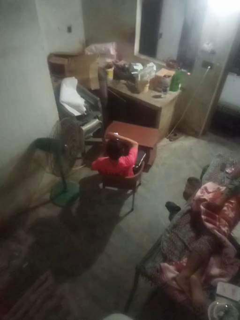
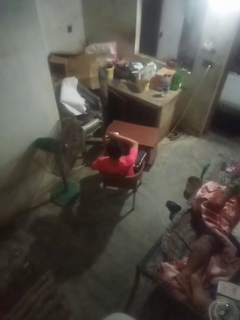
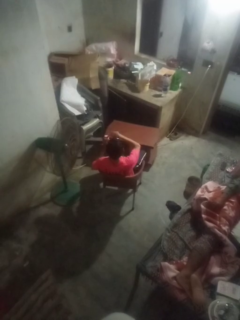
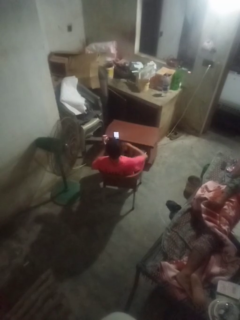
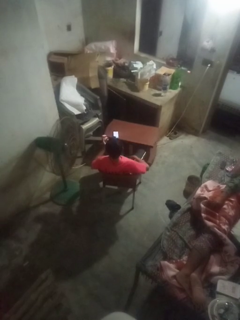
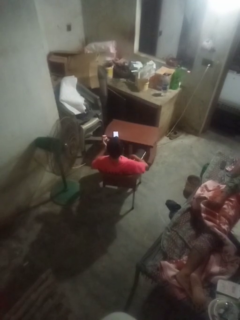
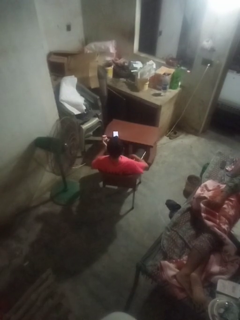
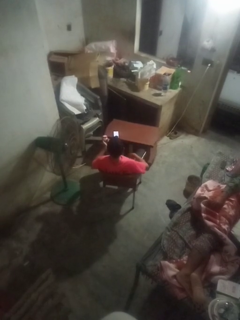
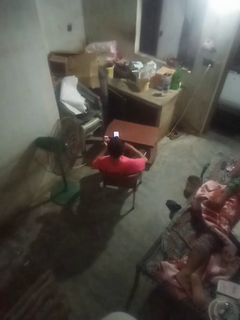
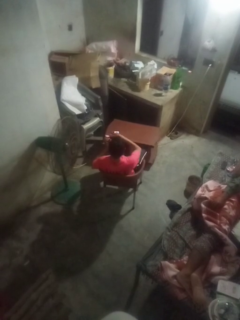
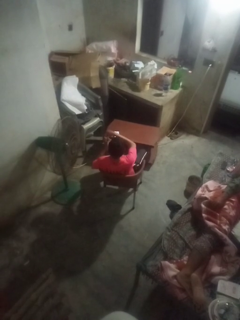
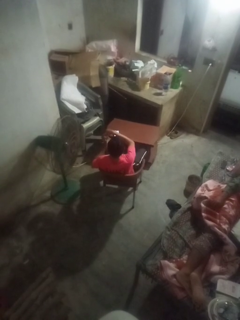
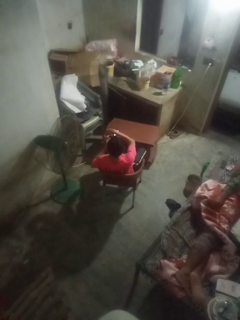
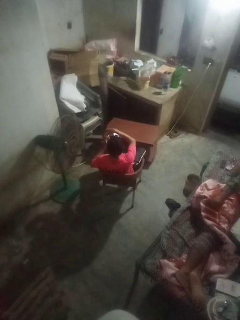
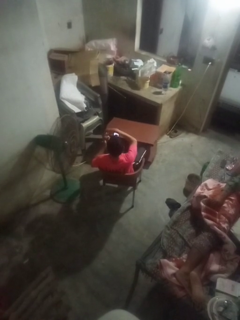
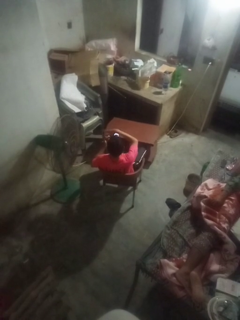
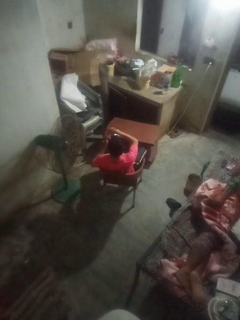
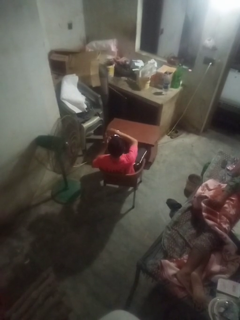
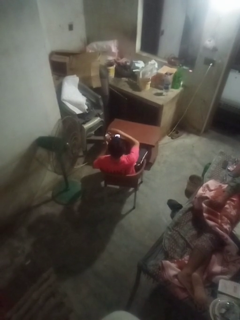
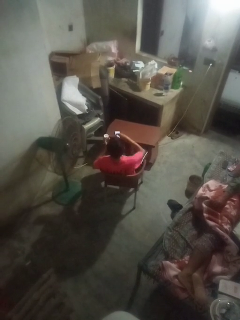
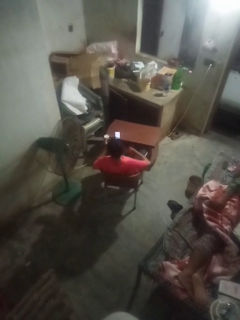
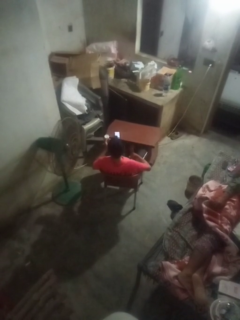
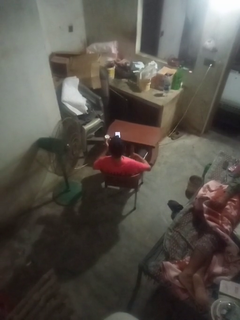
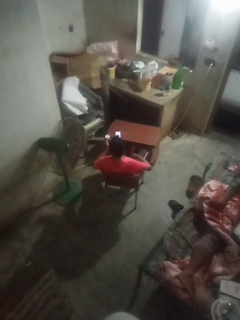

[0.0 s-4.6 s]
person opens jar

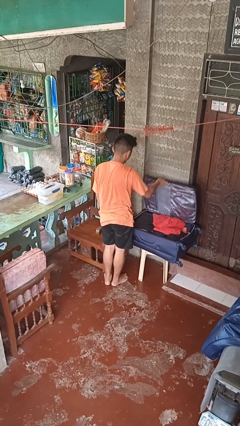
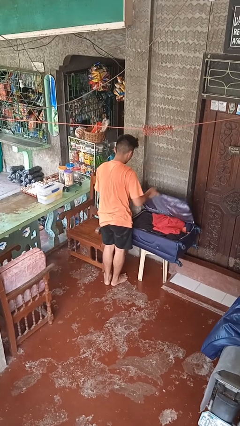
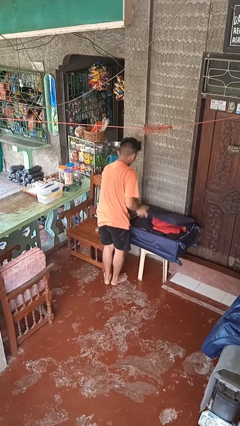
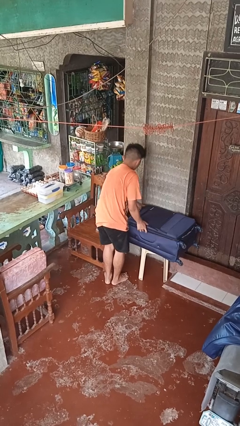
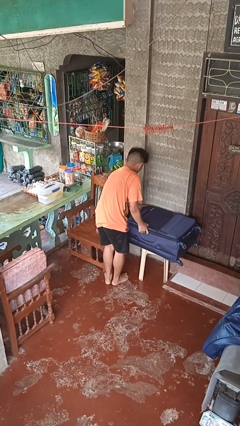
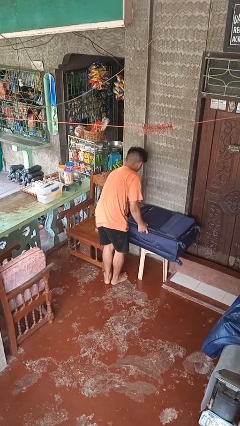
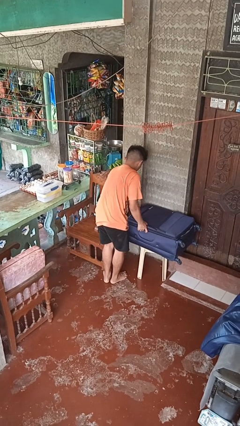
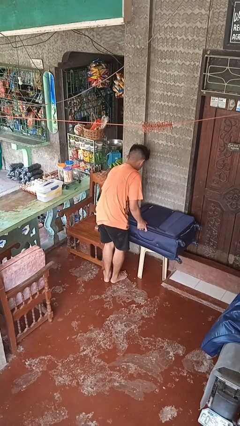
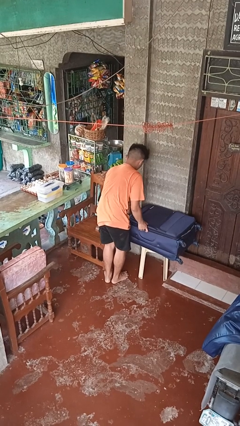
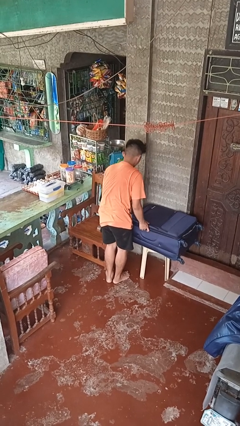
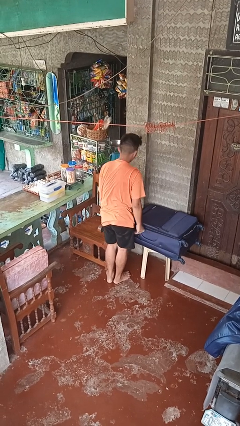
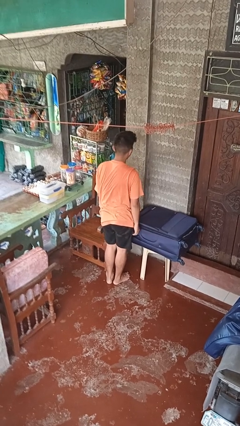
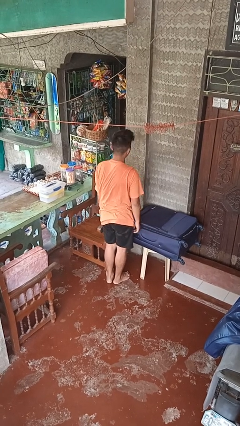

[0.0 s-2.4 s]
person closes suitcase

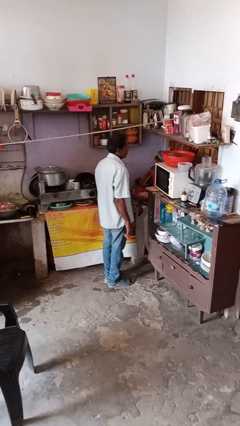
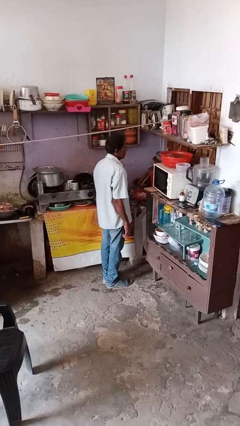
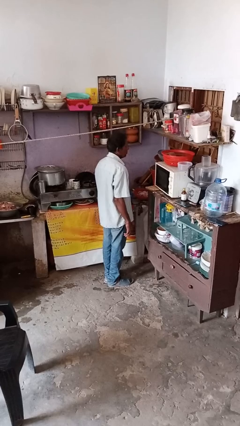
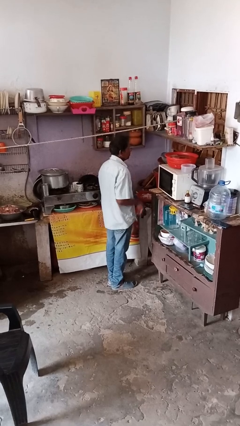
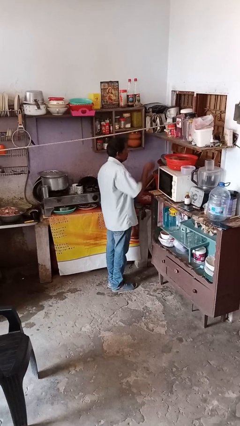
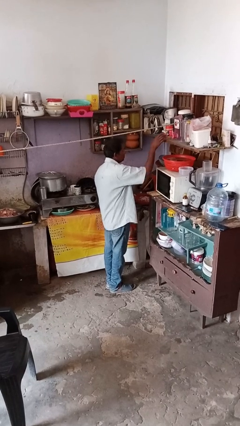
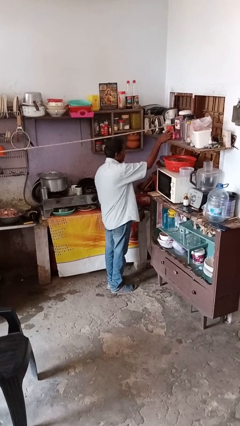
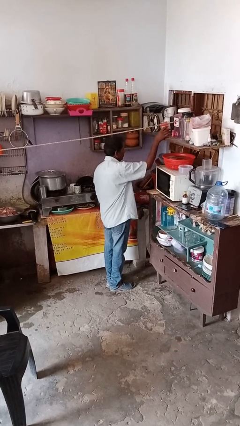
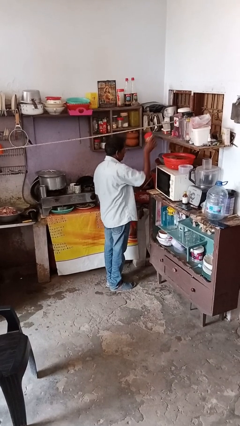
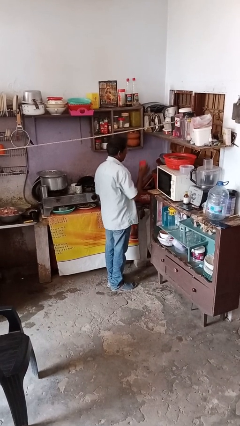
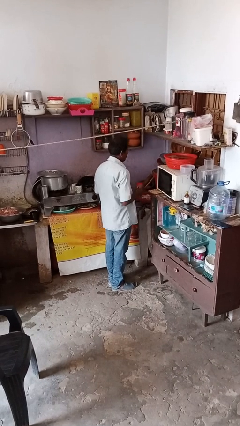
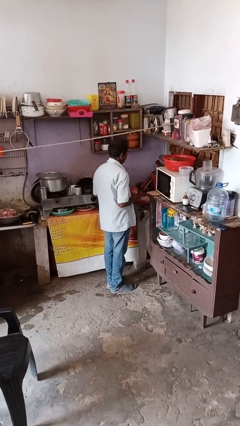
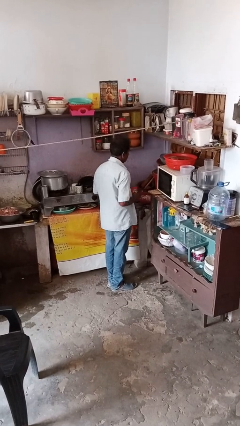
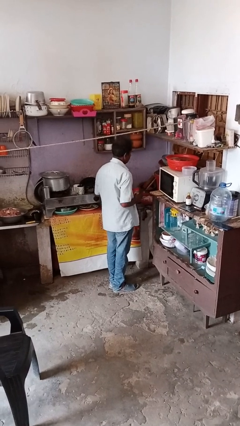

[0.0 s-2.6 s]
person picks up object from shelf

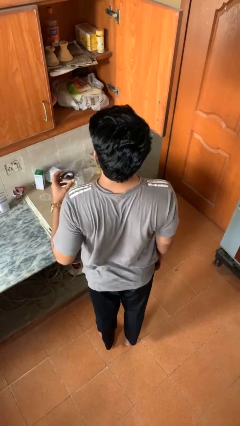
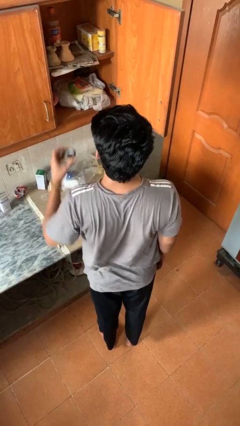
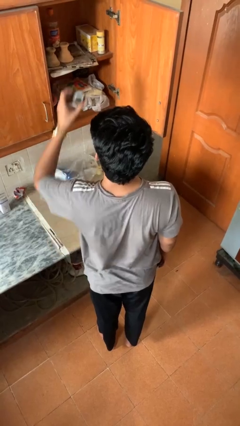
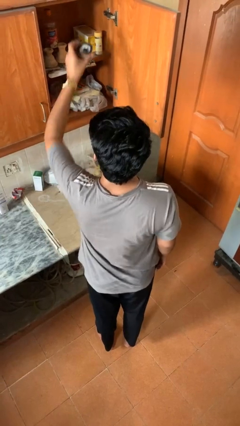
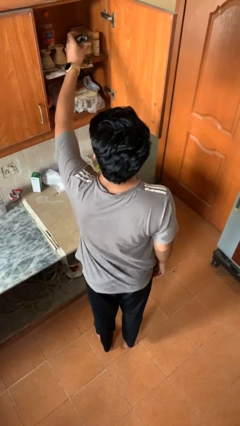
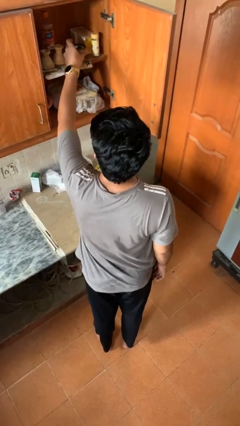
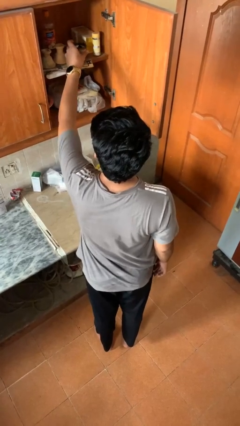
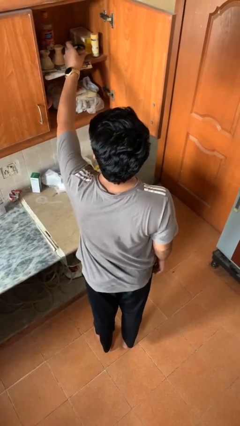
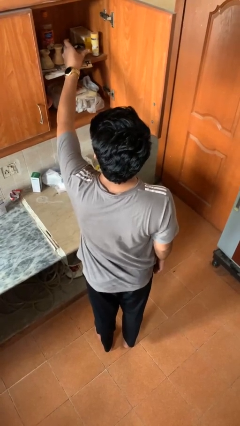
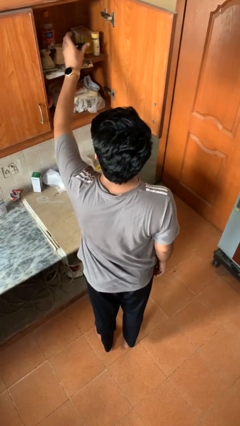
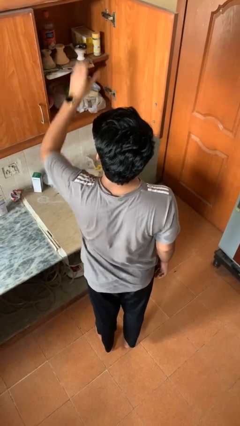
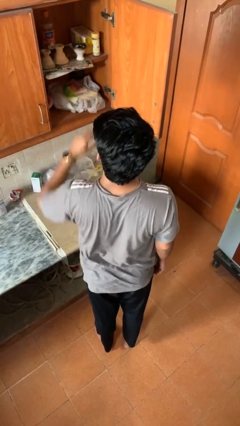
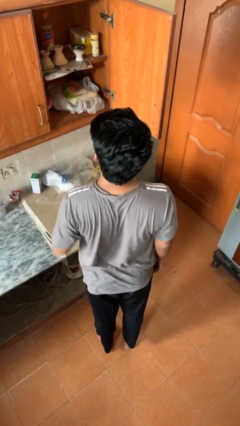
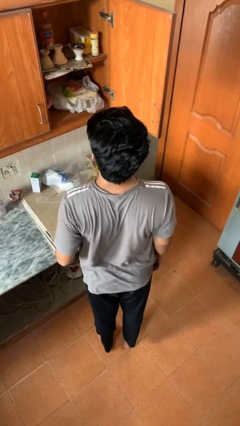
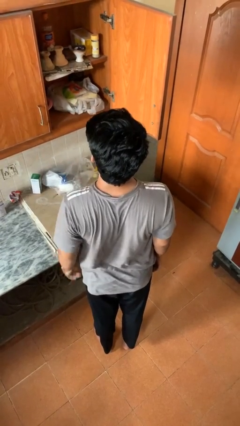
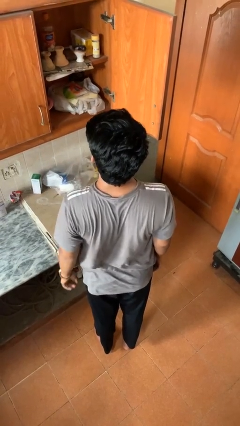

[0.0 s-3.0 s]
person puts object in cabinet

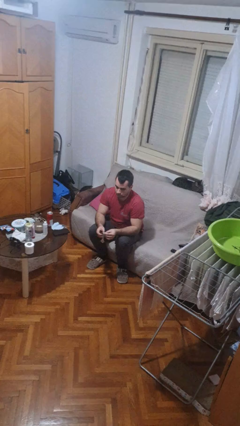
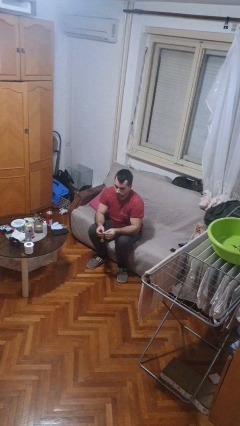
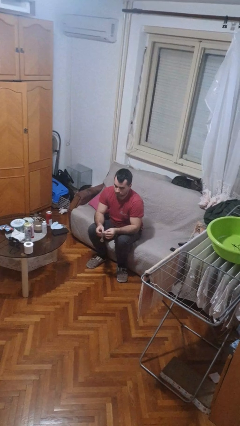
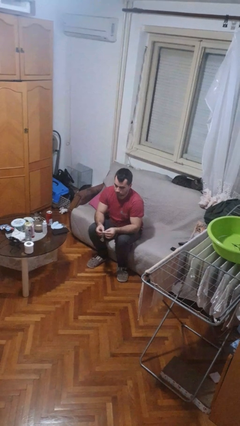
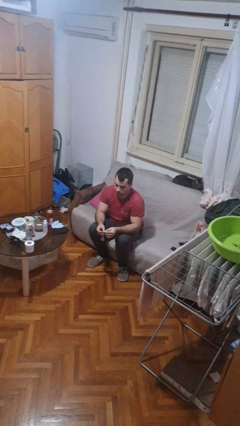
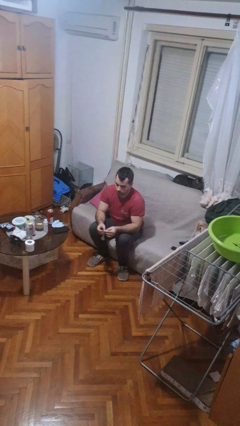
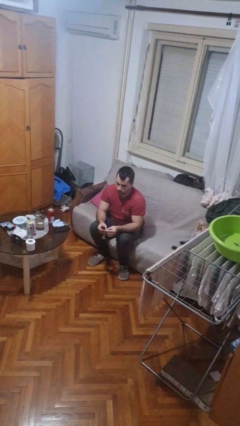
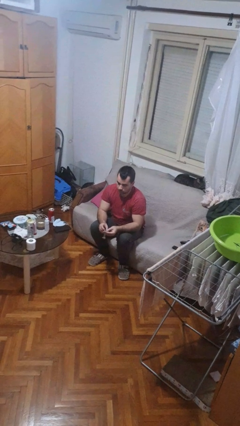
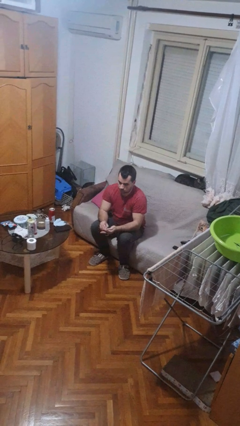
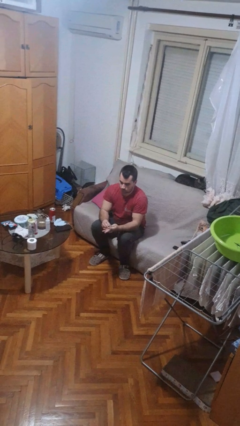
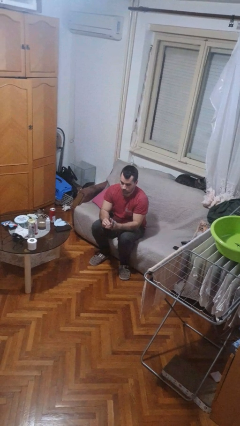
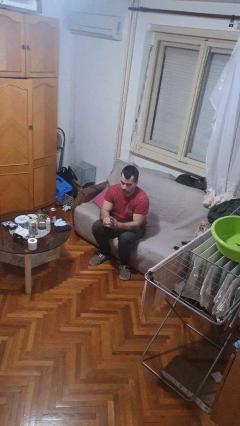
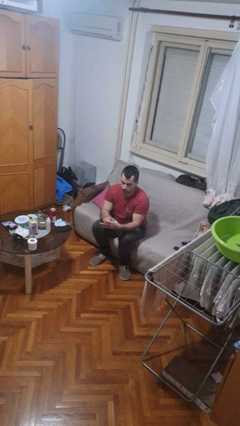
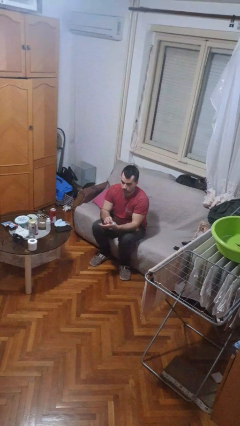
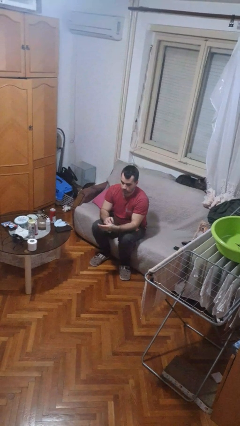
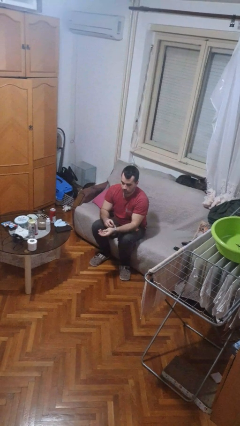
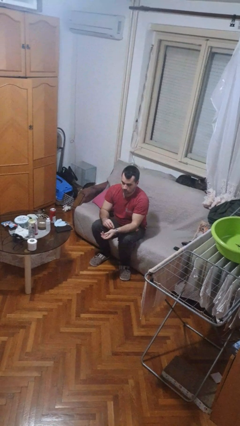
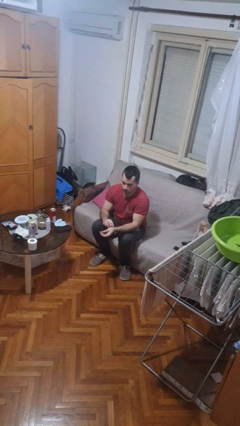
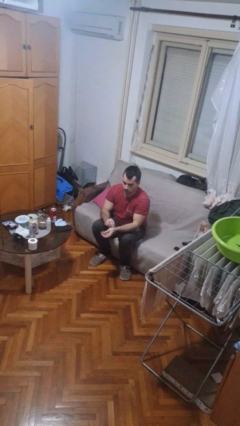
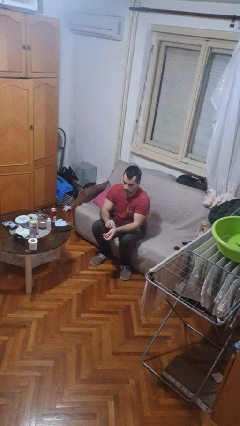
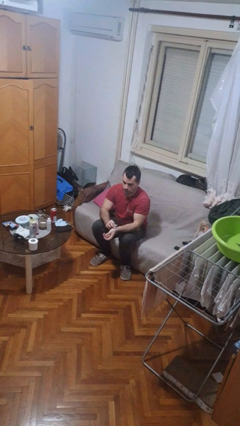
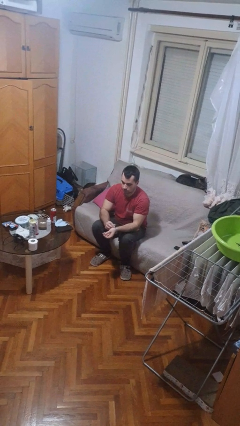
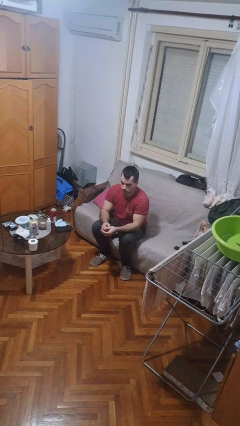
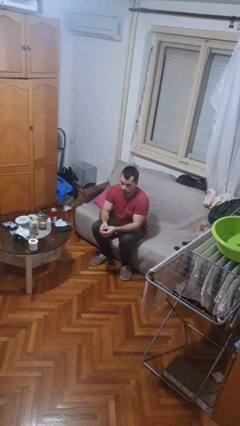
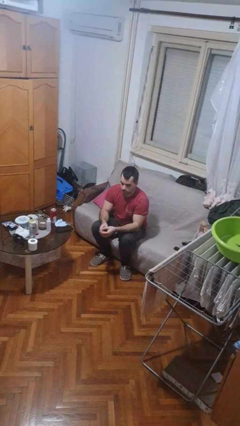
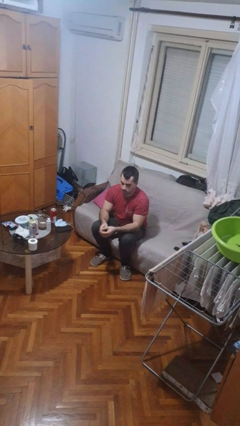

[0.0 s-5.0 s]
person puts on wristwatch

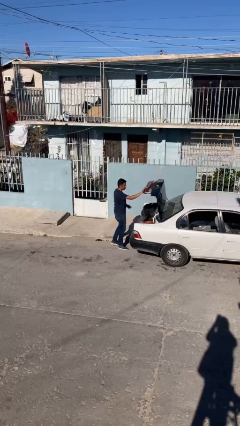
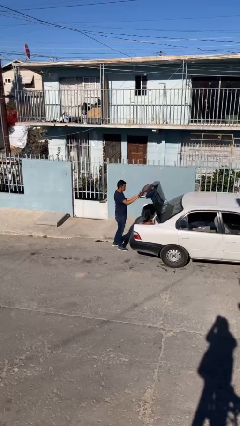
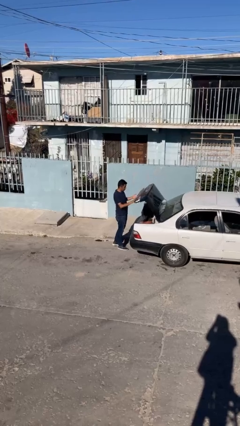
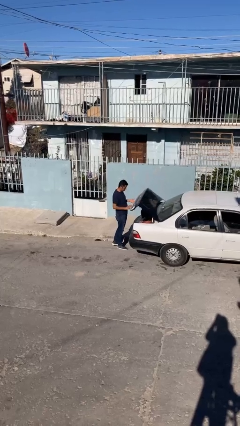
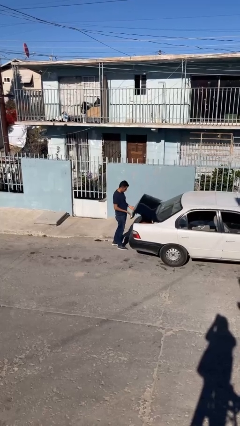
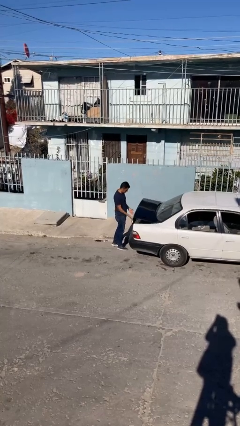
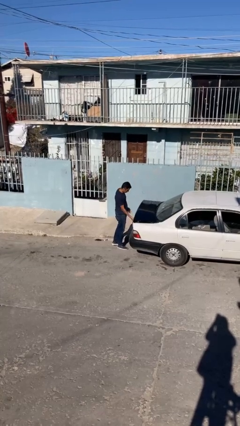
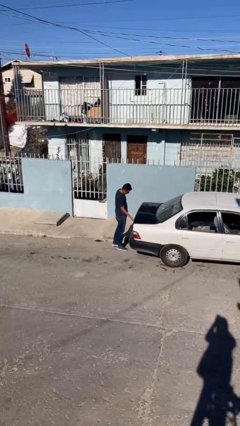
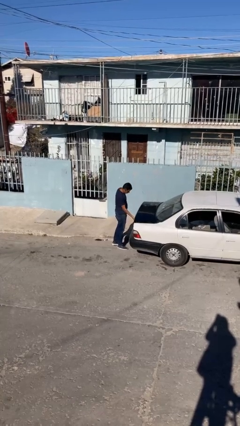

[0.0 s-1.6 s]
person closes car trunk
